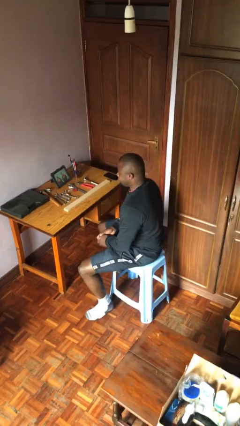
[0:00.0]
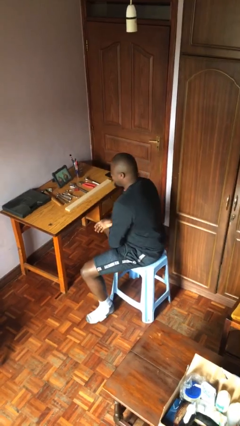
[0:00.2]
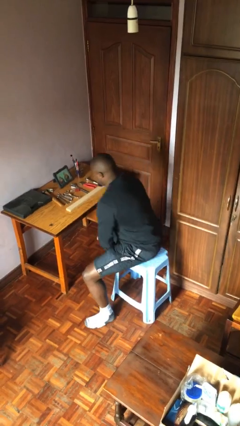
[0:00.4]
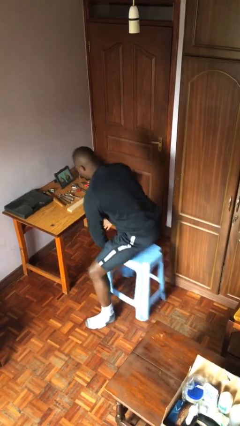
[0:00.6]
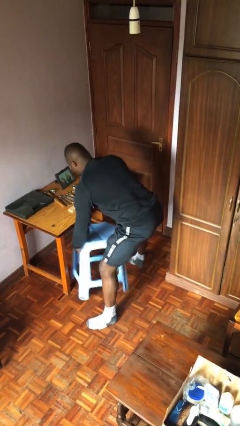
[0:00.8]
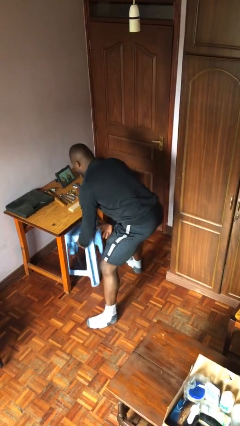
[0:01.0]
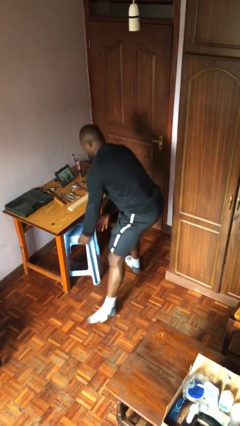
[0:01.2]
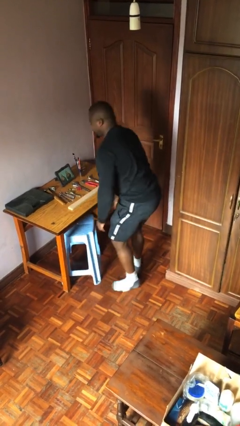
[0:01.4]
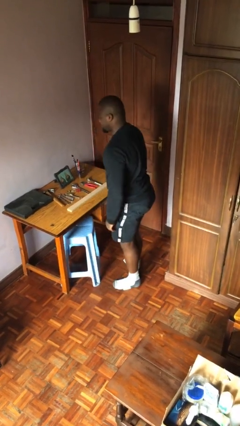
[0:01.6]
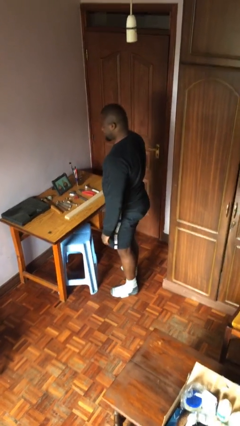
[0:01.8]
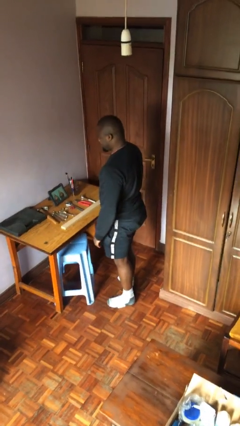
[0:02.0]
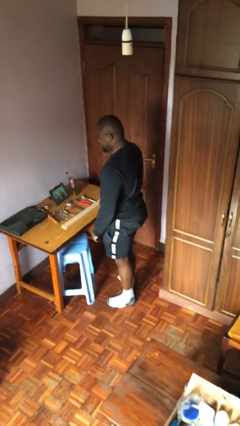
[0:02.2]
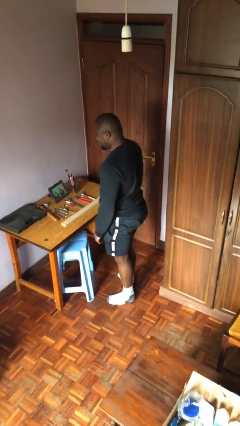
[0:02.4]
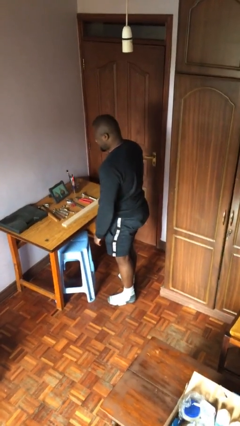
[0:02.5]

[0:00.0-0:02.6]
person stands up

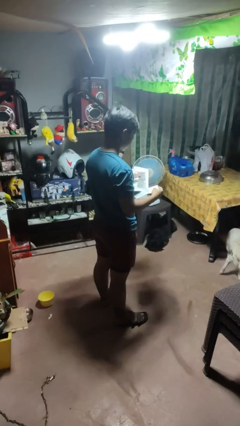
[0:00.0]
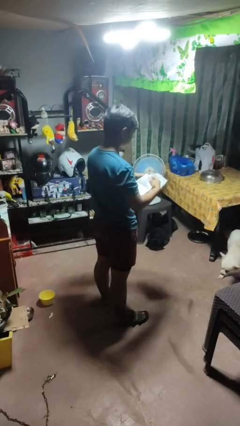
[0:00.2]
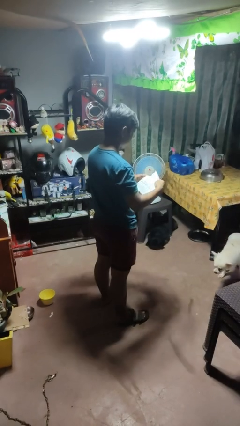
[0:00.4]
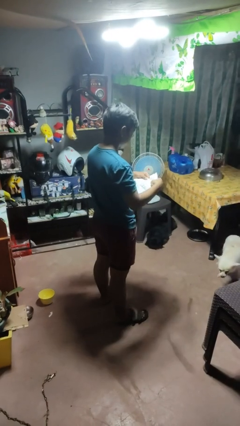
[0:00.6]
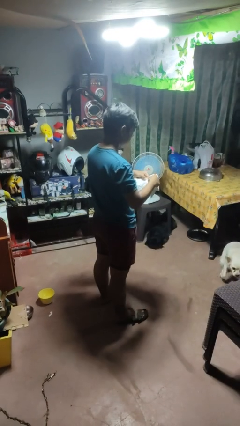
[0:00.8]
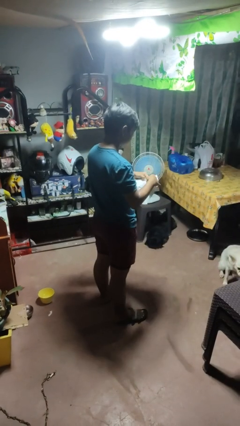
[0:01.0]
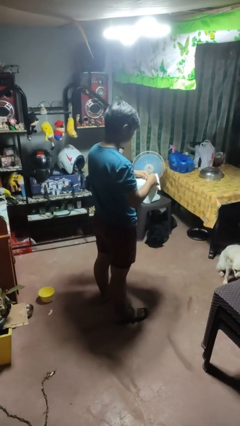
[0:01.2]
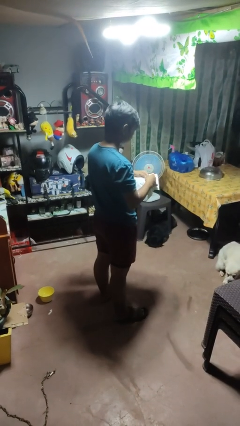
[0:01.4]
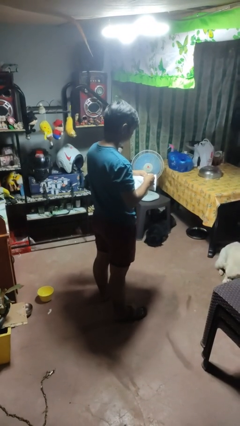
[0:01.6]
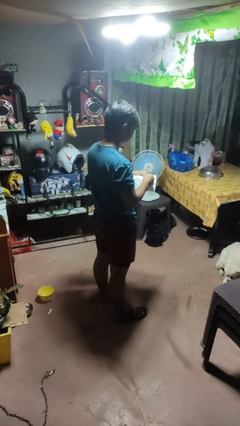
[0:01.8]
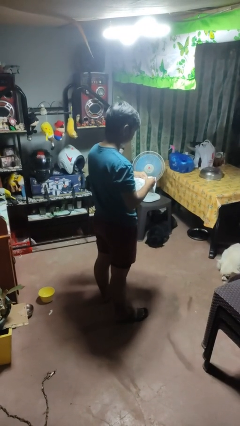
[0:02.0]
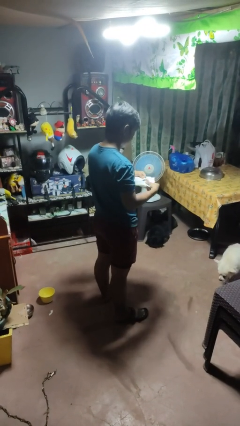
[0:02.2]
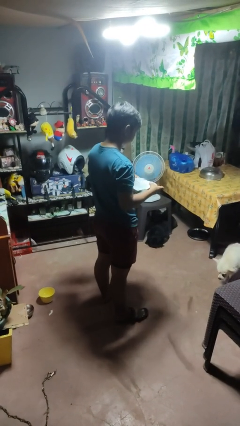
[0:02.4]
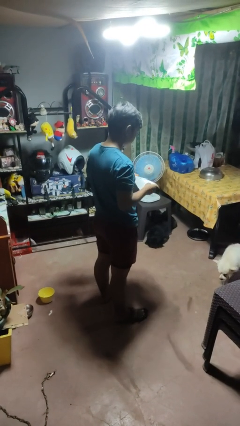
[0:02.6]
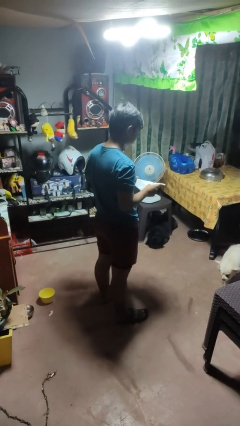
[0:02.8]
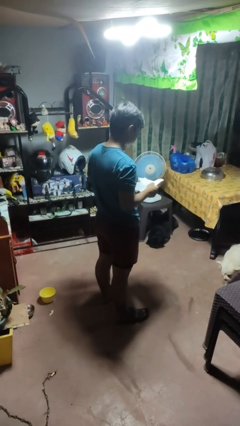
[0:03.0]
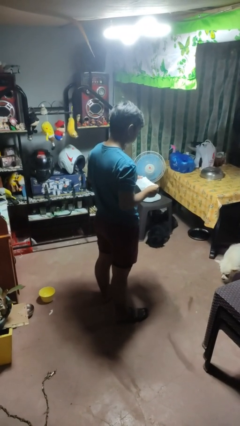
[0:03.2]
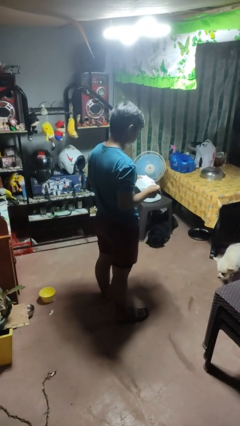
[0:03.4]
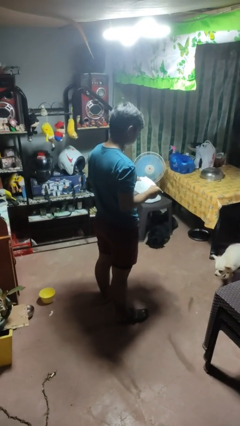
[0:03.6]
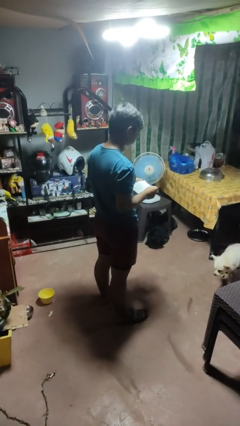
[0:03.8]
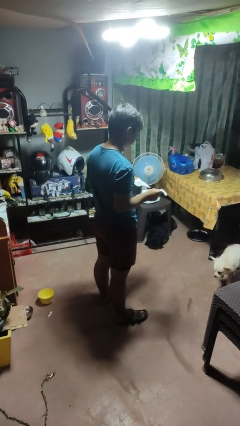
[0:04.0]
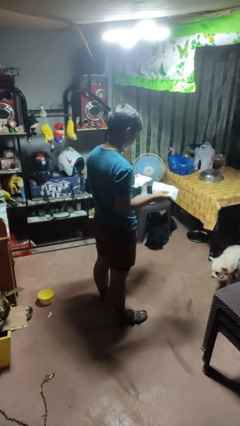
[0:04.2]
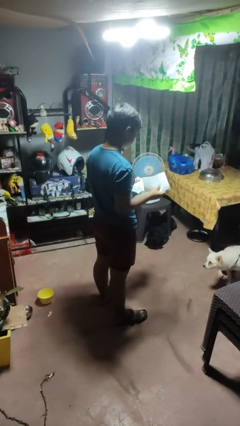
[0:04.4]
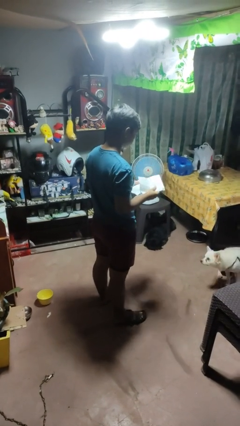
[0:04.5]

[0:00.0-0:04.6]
person tears paper

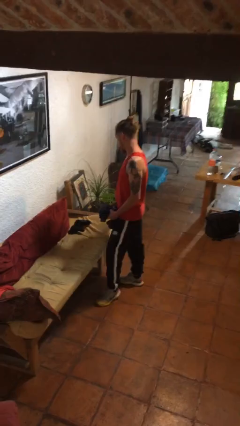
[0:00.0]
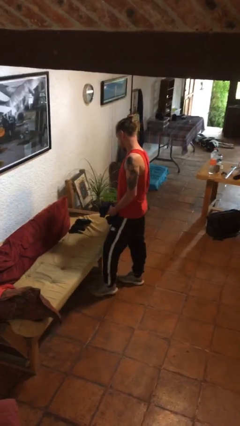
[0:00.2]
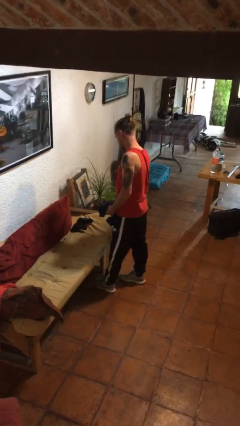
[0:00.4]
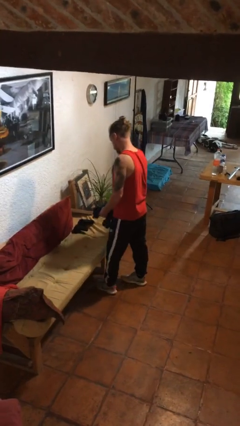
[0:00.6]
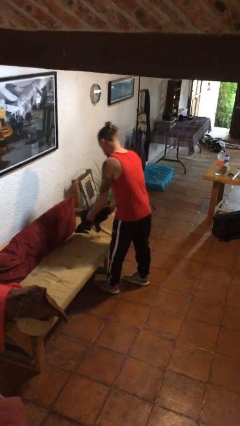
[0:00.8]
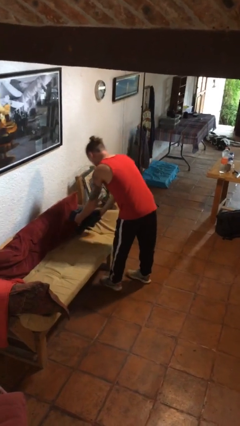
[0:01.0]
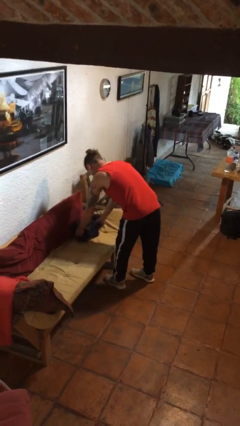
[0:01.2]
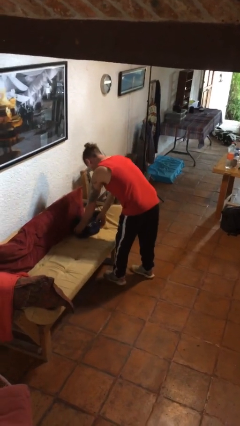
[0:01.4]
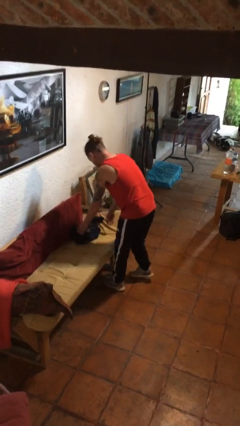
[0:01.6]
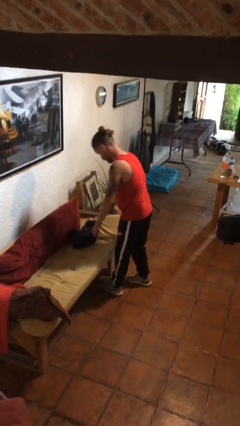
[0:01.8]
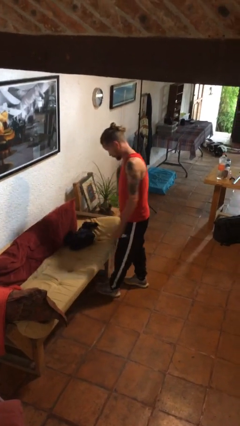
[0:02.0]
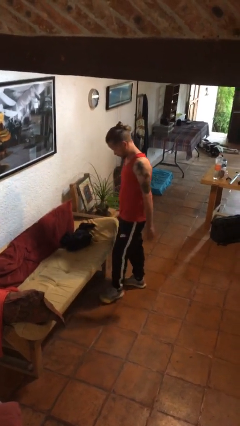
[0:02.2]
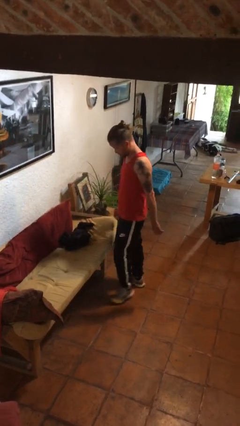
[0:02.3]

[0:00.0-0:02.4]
person puts down object on couch

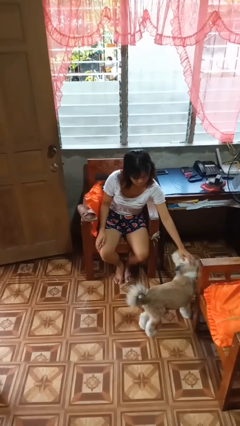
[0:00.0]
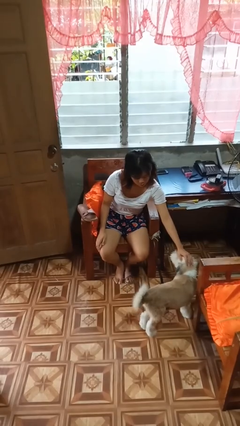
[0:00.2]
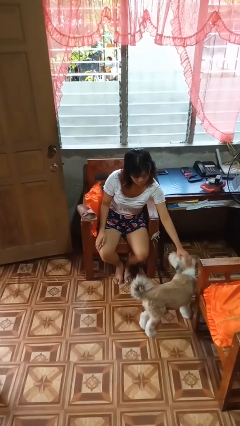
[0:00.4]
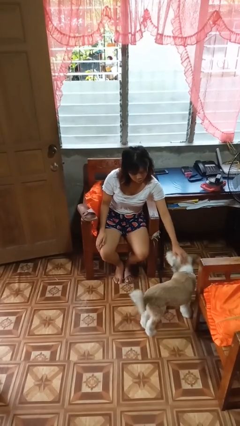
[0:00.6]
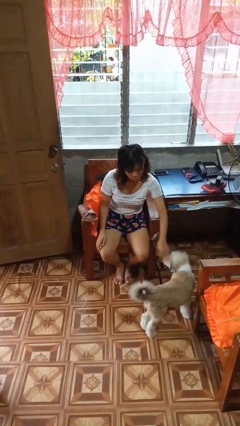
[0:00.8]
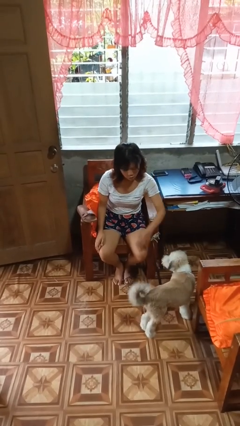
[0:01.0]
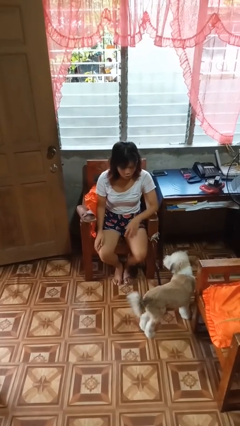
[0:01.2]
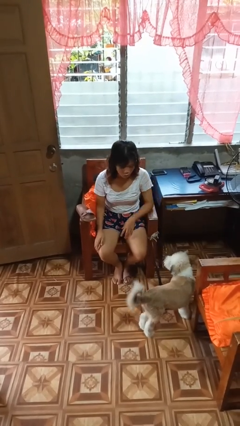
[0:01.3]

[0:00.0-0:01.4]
person pets dog

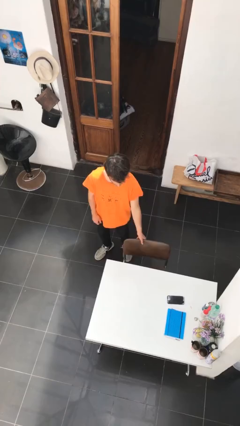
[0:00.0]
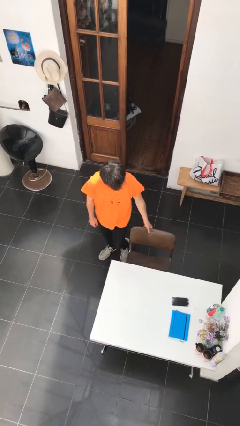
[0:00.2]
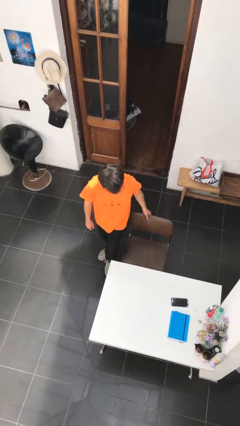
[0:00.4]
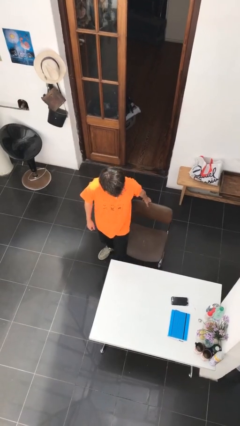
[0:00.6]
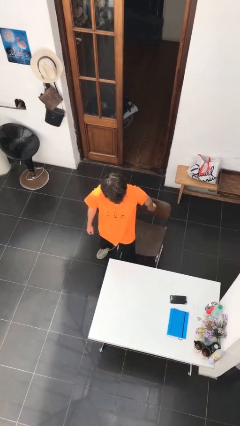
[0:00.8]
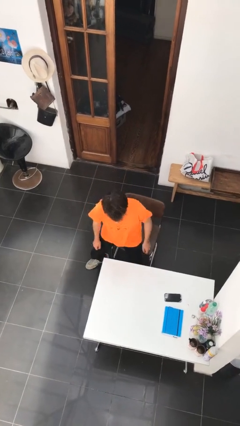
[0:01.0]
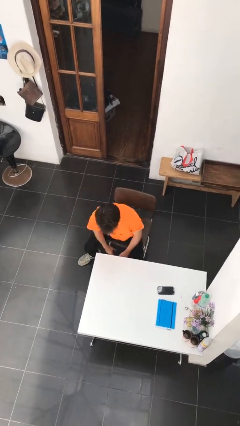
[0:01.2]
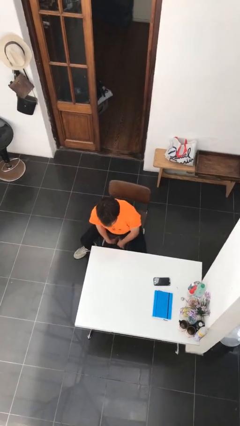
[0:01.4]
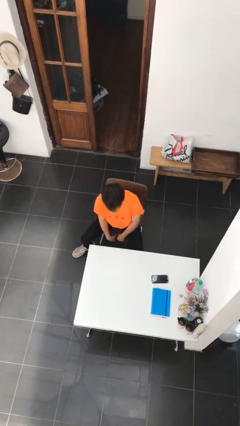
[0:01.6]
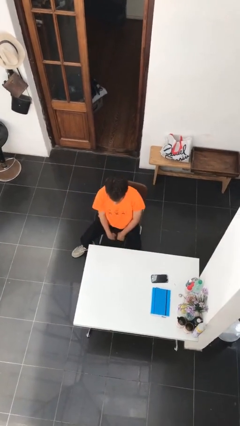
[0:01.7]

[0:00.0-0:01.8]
person sits down

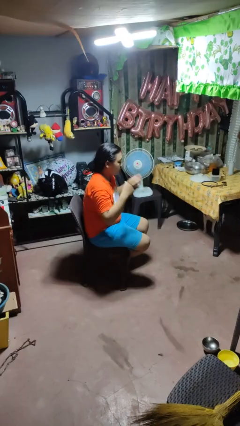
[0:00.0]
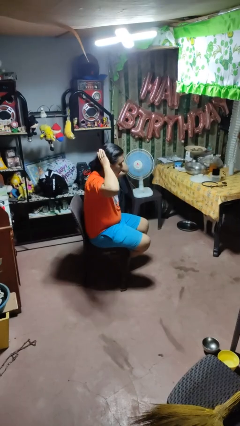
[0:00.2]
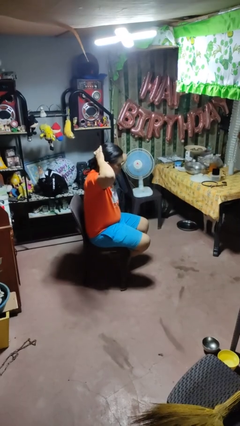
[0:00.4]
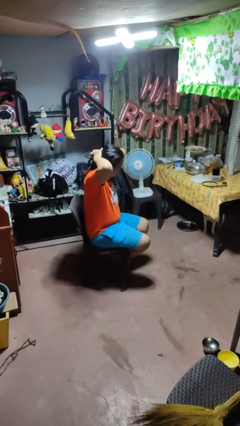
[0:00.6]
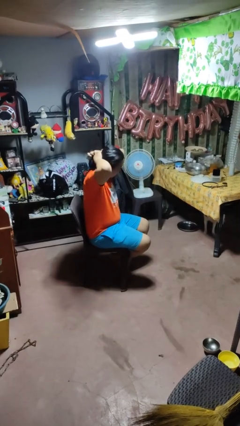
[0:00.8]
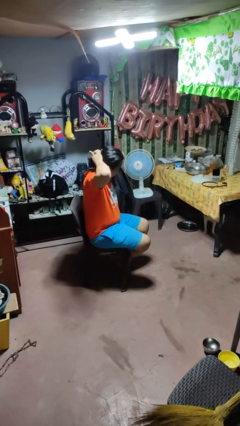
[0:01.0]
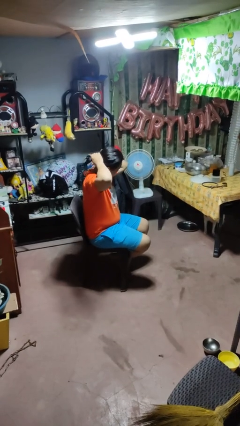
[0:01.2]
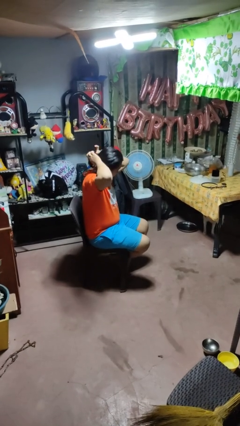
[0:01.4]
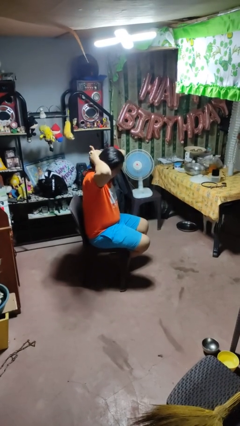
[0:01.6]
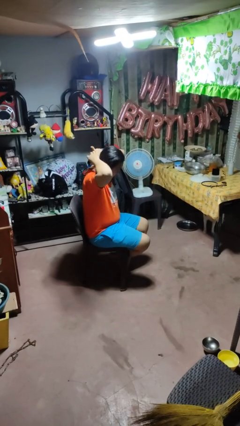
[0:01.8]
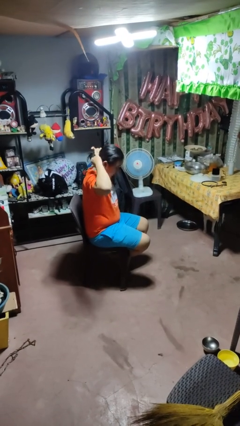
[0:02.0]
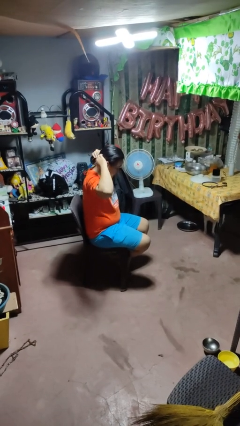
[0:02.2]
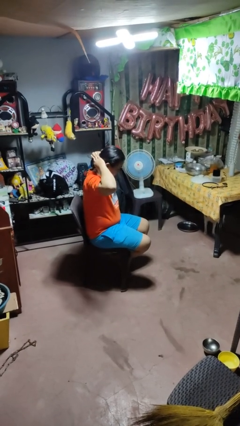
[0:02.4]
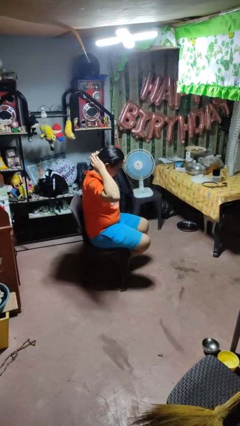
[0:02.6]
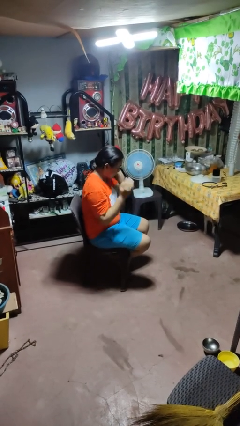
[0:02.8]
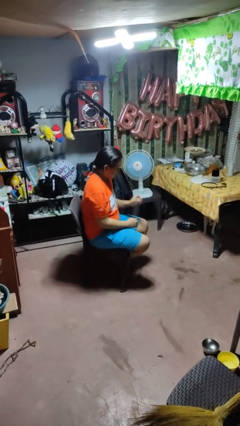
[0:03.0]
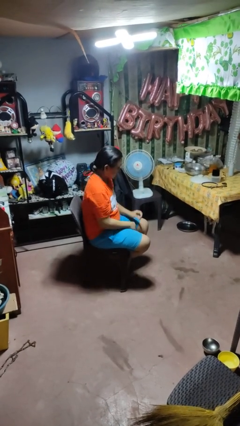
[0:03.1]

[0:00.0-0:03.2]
person puts hair in ponytail

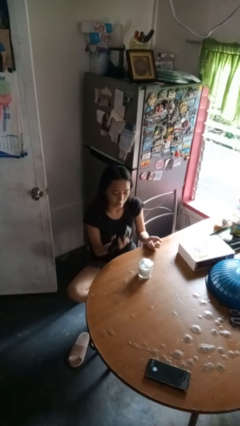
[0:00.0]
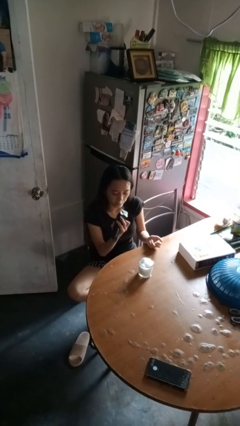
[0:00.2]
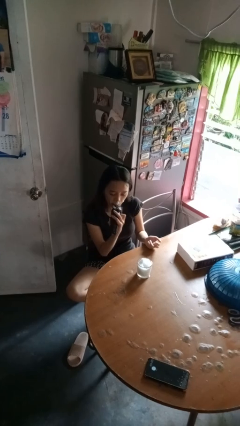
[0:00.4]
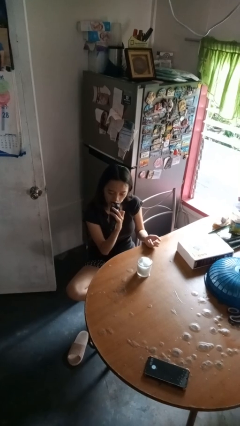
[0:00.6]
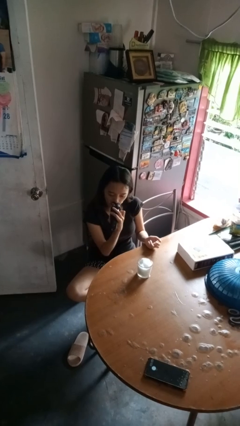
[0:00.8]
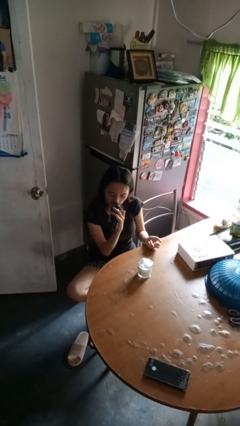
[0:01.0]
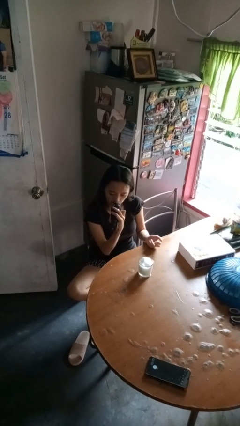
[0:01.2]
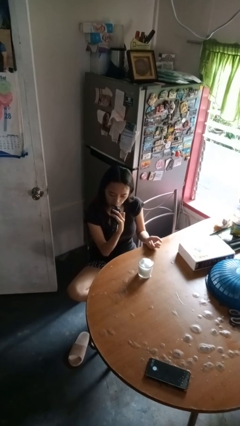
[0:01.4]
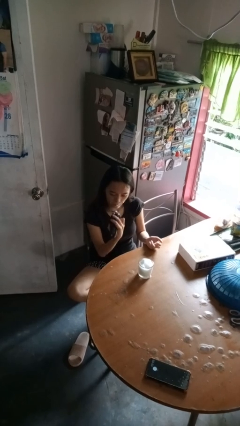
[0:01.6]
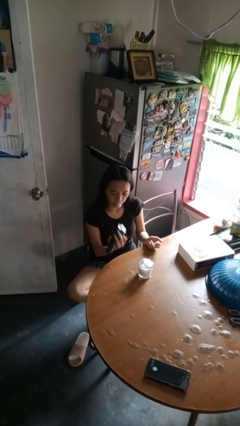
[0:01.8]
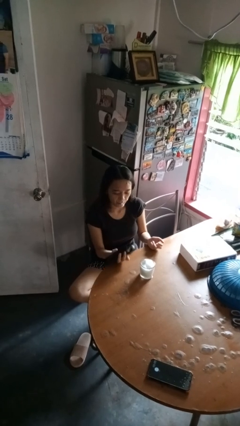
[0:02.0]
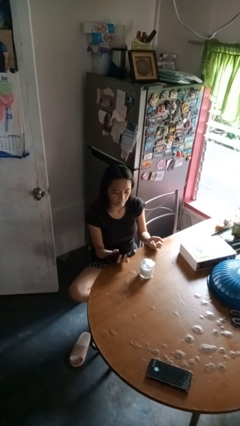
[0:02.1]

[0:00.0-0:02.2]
person shaves face
